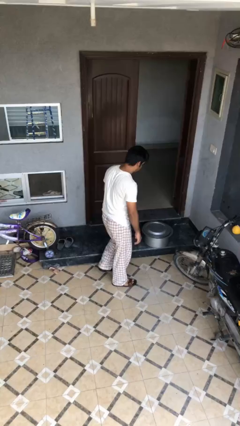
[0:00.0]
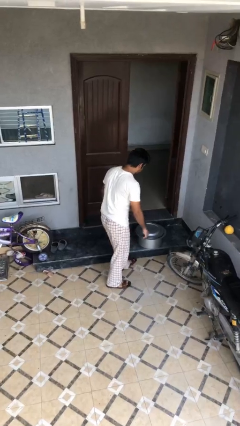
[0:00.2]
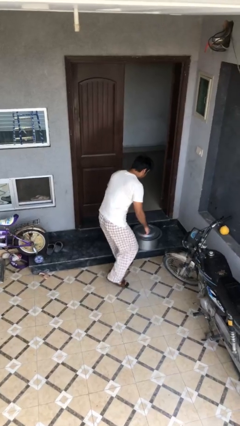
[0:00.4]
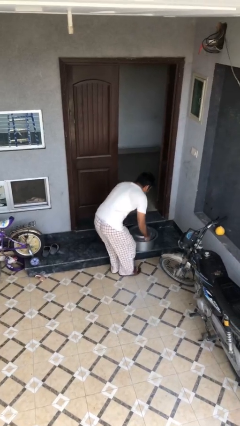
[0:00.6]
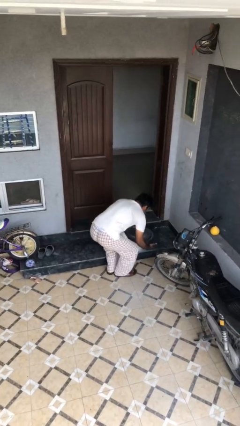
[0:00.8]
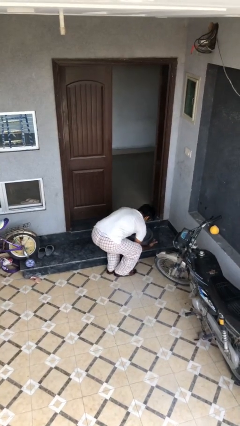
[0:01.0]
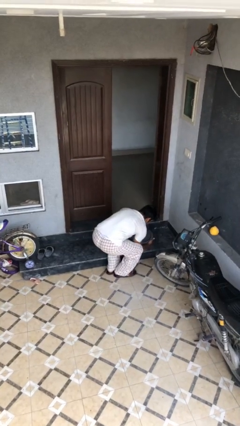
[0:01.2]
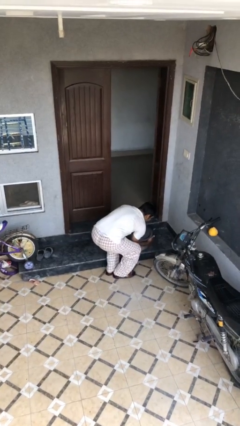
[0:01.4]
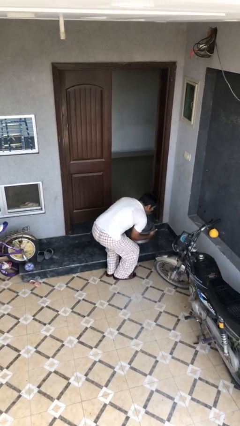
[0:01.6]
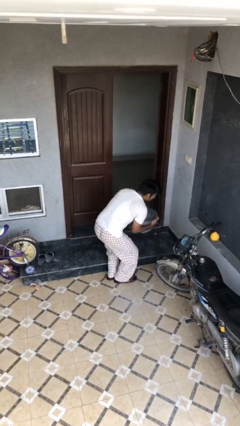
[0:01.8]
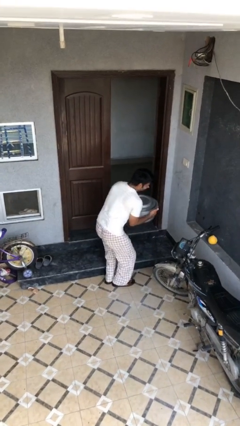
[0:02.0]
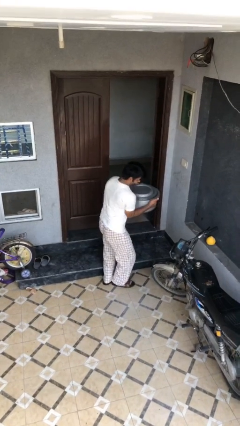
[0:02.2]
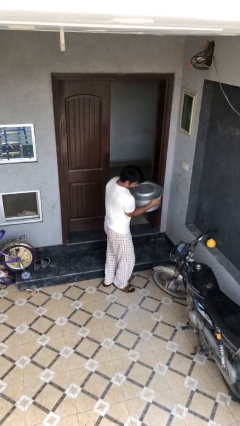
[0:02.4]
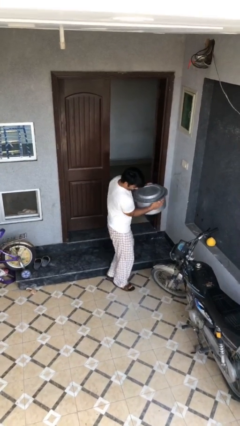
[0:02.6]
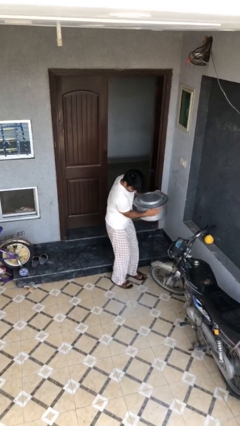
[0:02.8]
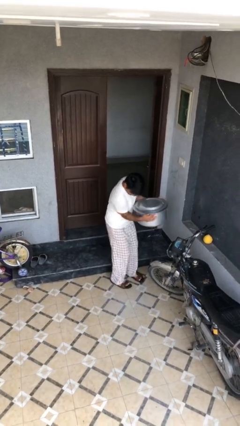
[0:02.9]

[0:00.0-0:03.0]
person picks up object from floor

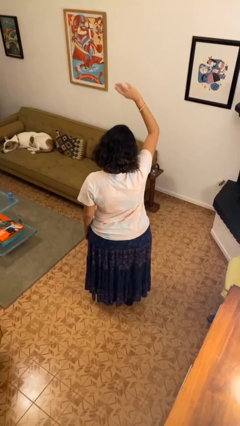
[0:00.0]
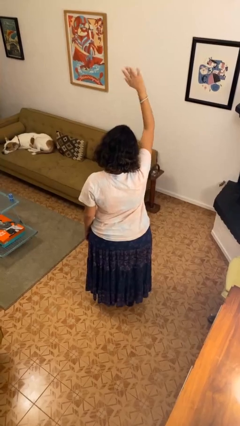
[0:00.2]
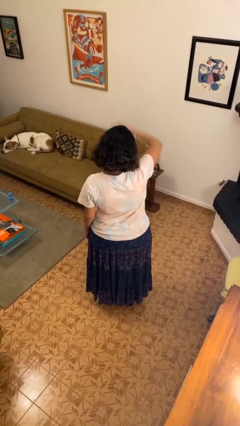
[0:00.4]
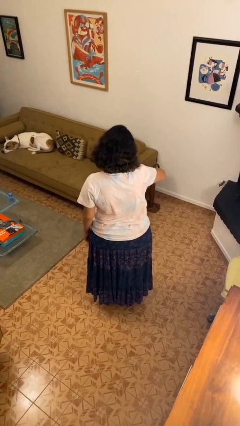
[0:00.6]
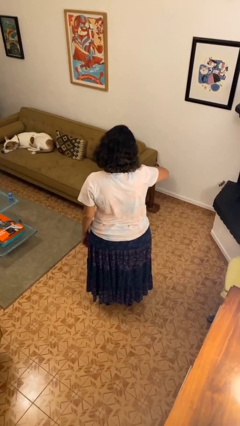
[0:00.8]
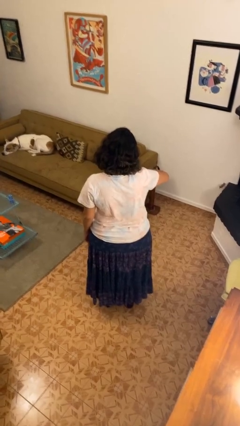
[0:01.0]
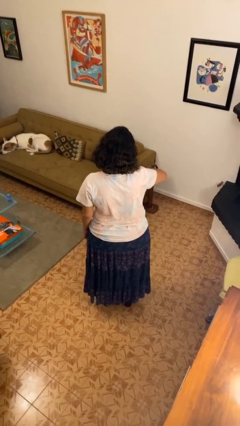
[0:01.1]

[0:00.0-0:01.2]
person gestures swipe down

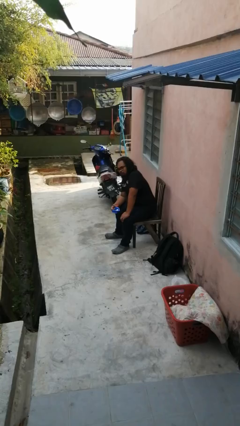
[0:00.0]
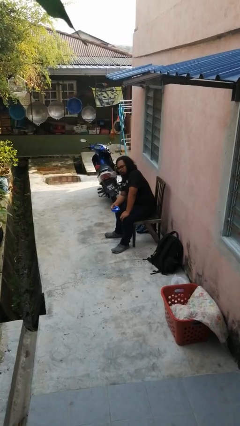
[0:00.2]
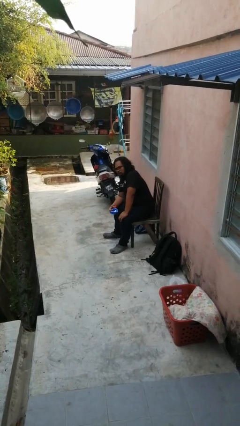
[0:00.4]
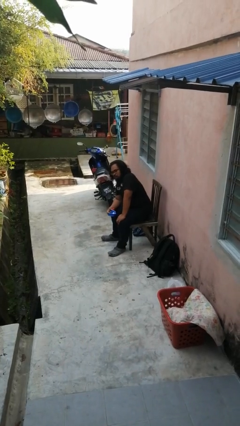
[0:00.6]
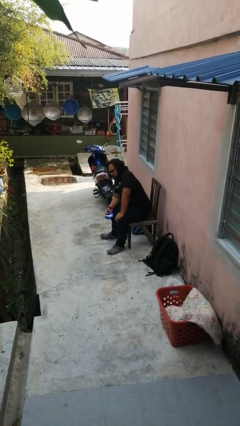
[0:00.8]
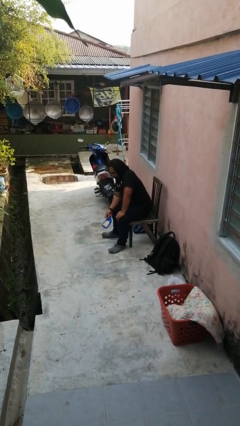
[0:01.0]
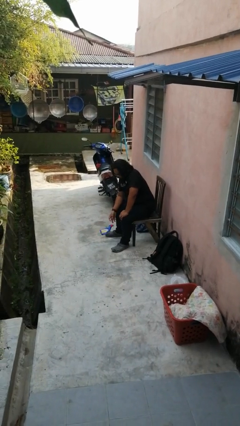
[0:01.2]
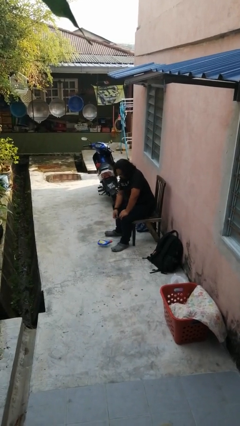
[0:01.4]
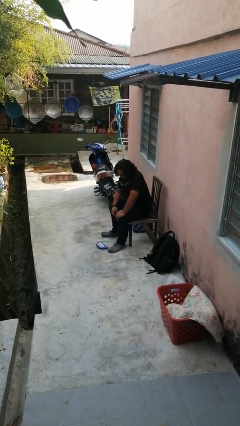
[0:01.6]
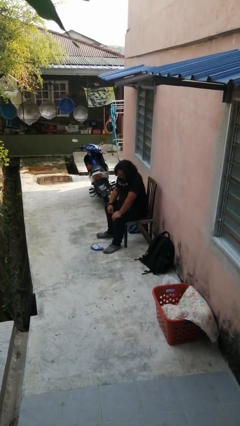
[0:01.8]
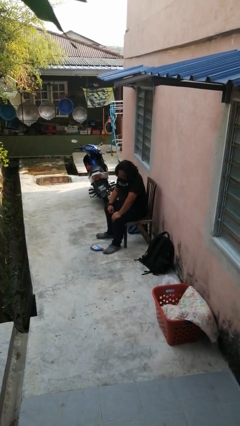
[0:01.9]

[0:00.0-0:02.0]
person drops object

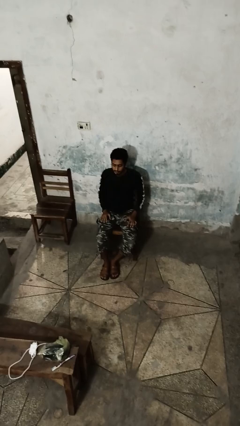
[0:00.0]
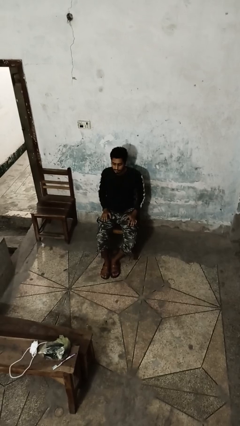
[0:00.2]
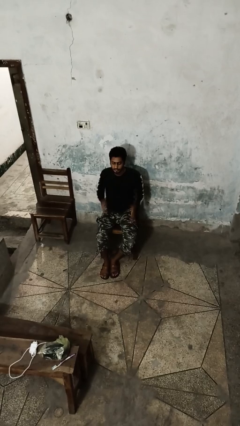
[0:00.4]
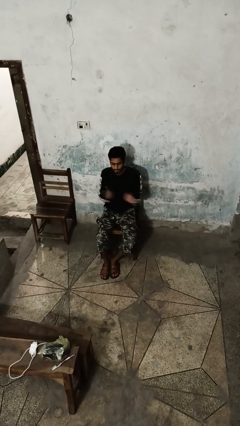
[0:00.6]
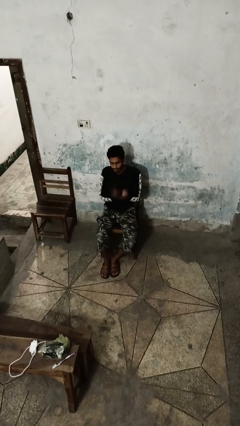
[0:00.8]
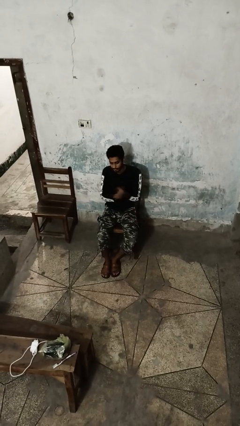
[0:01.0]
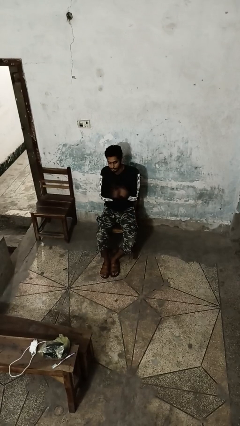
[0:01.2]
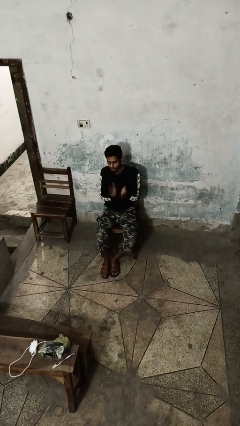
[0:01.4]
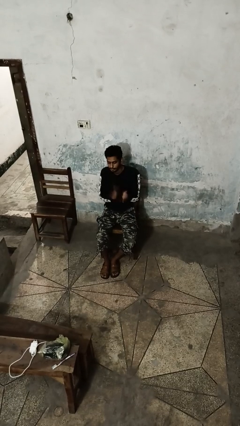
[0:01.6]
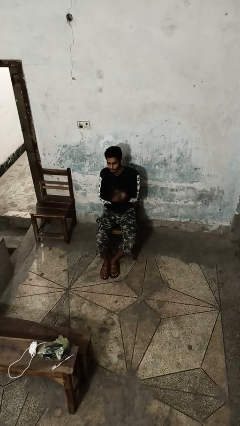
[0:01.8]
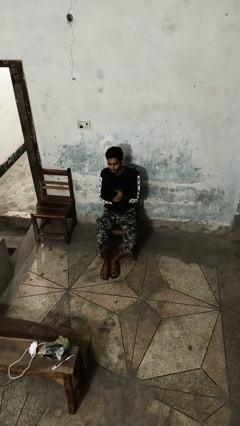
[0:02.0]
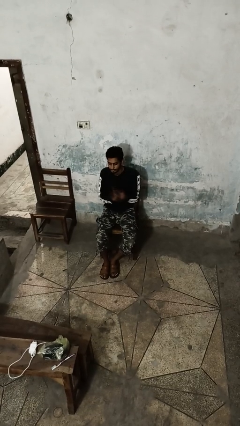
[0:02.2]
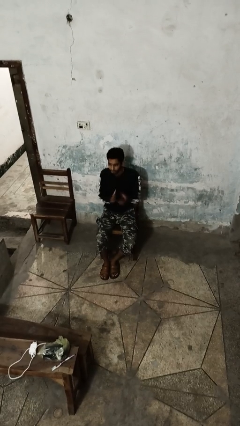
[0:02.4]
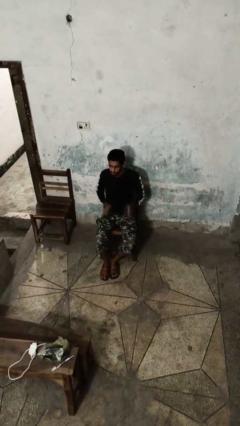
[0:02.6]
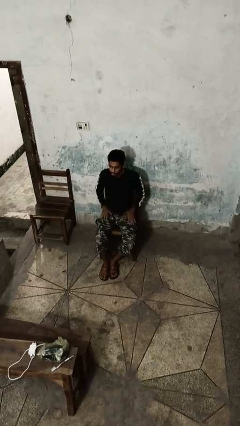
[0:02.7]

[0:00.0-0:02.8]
person claps hands

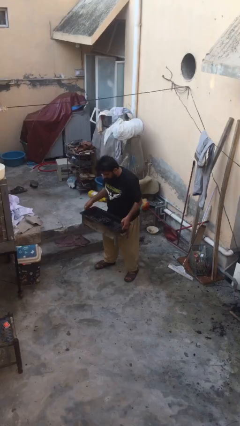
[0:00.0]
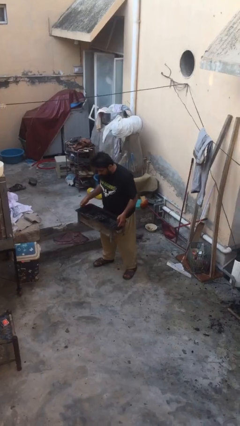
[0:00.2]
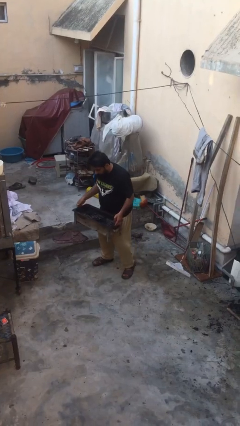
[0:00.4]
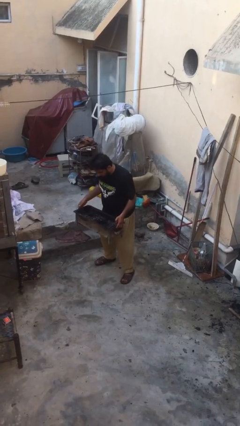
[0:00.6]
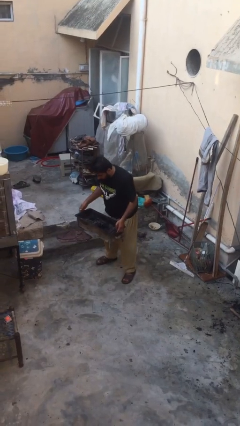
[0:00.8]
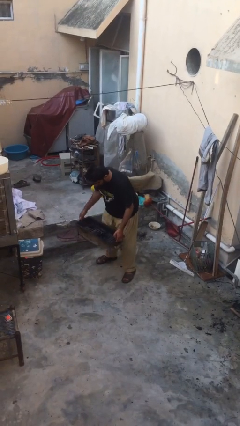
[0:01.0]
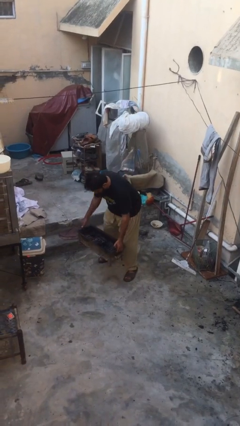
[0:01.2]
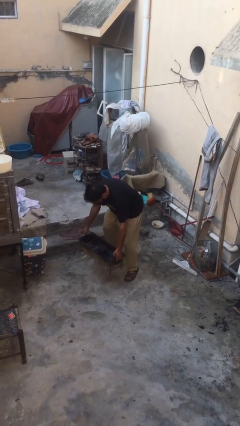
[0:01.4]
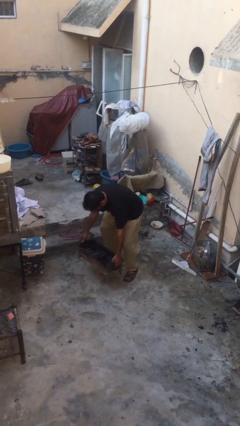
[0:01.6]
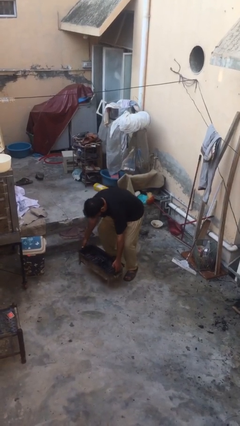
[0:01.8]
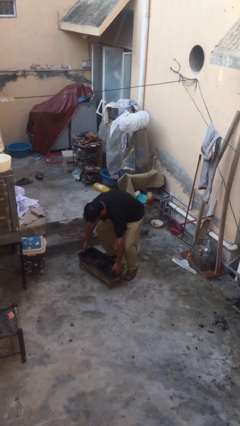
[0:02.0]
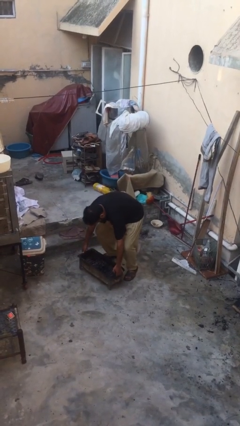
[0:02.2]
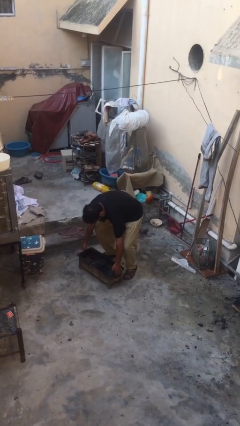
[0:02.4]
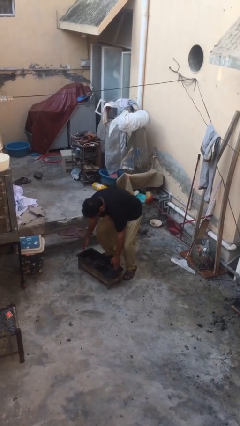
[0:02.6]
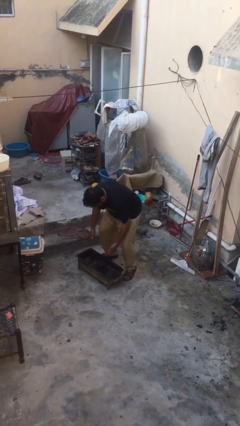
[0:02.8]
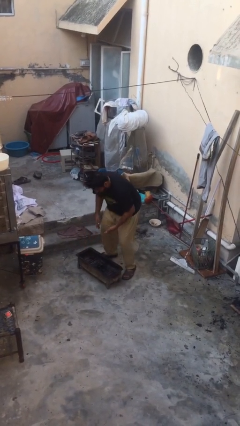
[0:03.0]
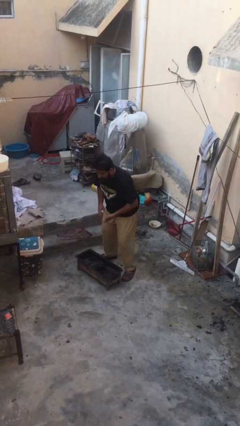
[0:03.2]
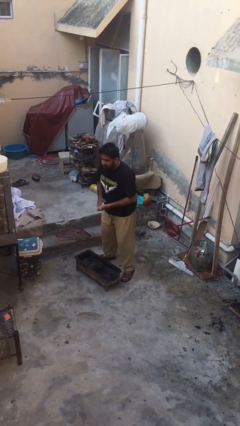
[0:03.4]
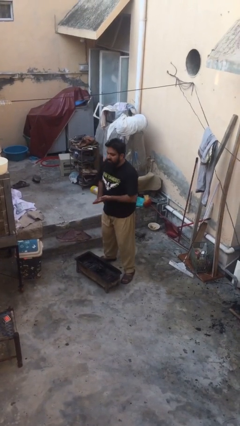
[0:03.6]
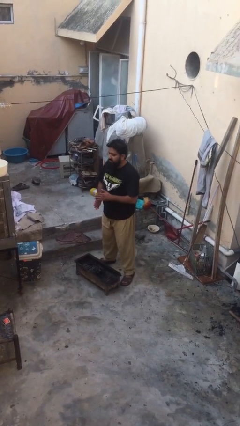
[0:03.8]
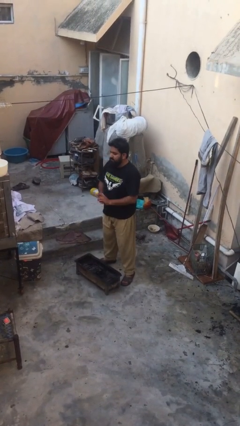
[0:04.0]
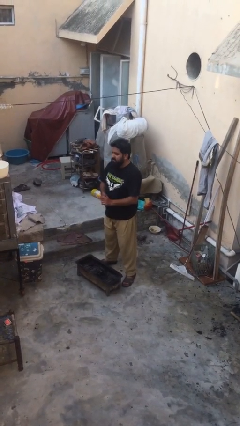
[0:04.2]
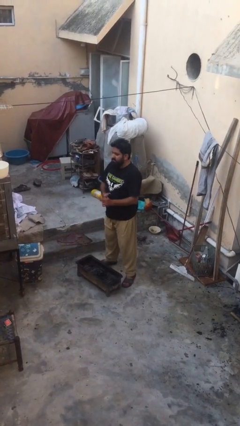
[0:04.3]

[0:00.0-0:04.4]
person puts down object on floor

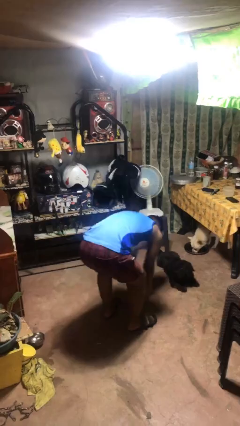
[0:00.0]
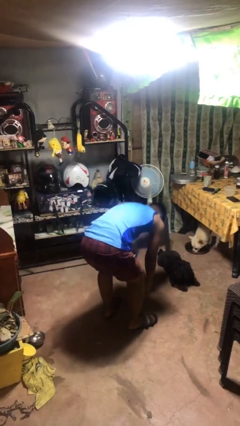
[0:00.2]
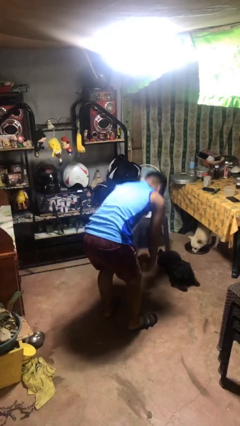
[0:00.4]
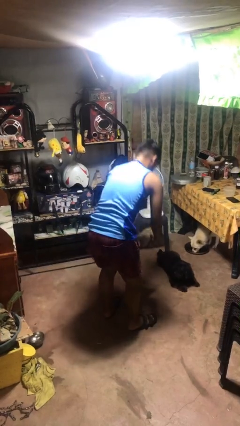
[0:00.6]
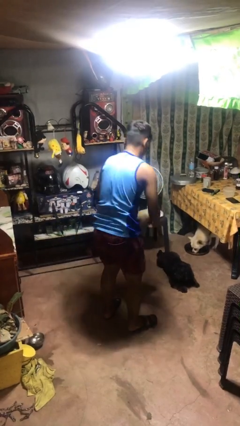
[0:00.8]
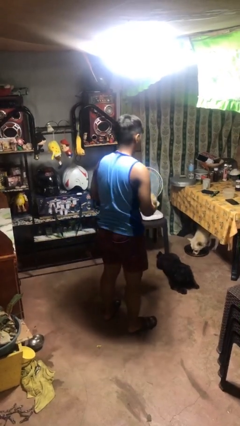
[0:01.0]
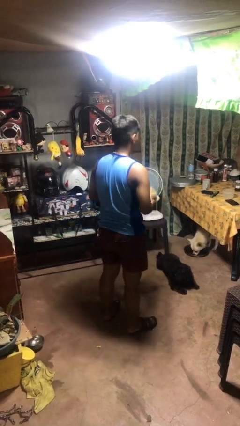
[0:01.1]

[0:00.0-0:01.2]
person catches dropped object

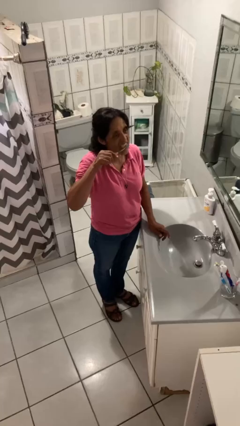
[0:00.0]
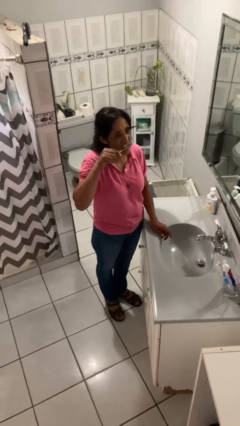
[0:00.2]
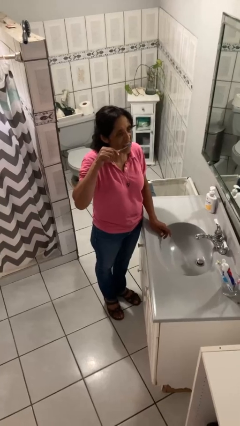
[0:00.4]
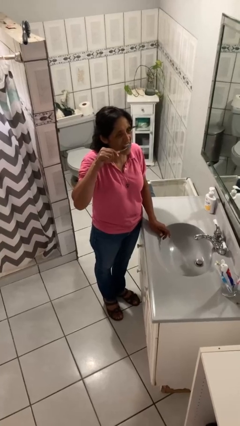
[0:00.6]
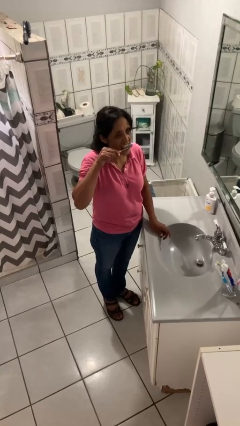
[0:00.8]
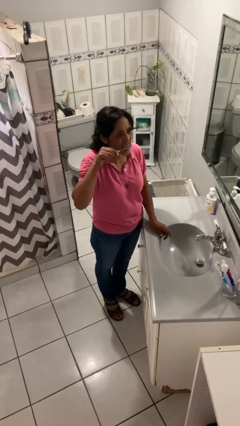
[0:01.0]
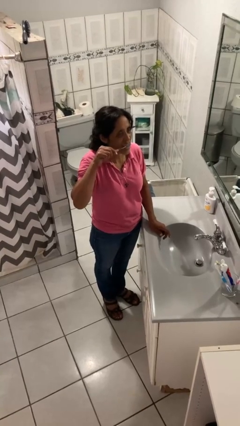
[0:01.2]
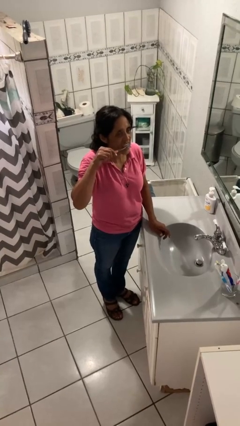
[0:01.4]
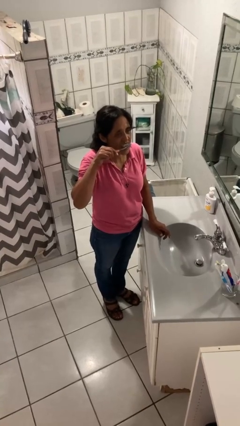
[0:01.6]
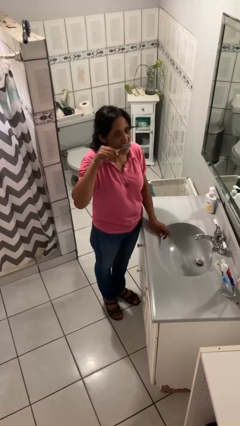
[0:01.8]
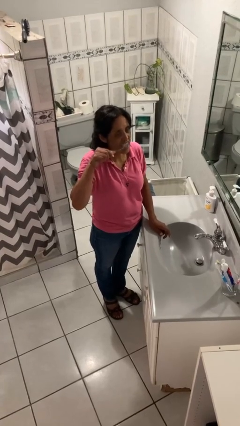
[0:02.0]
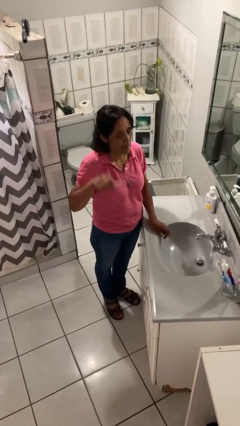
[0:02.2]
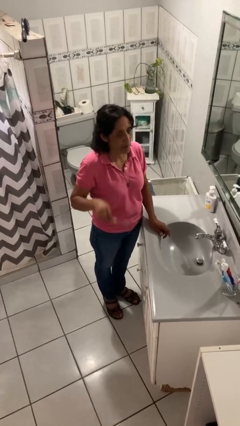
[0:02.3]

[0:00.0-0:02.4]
person brushes teeth
